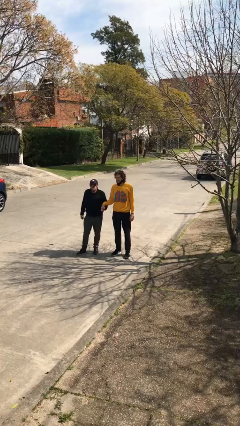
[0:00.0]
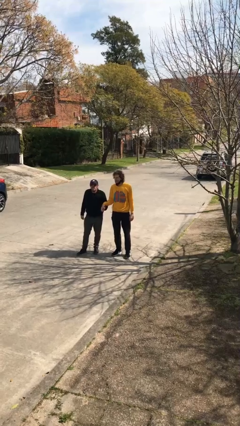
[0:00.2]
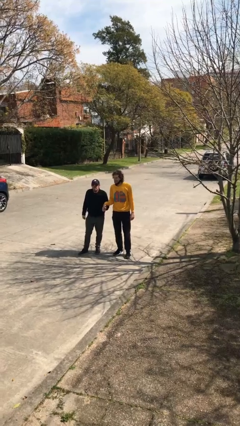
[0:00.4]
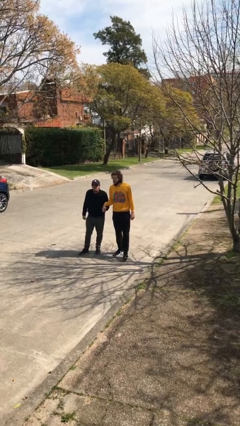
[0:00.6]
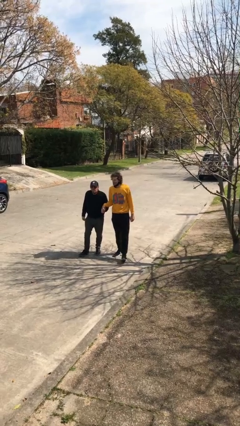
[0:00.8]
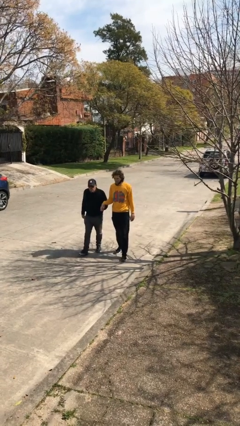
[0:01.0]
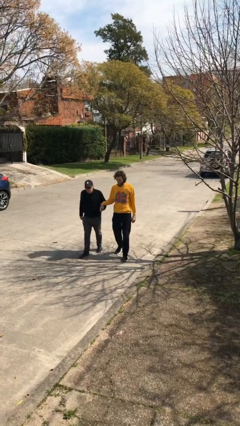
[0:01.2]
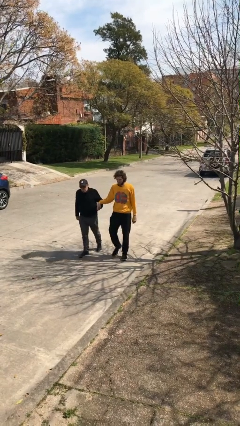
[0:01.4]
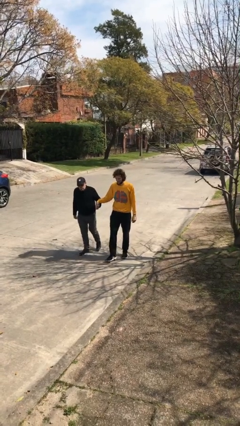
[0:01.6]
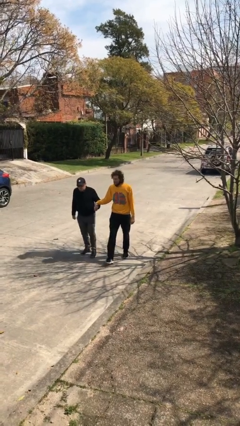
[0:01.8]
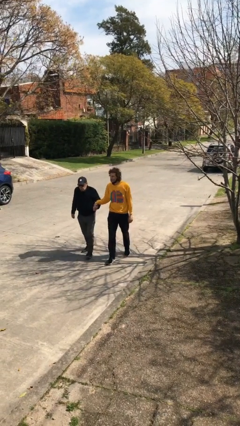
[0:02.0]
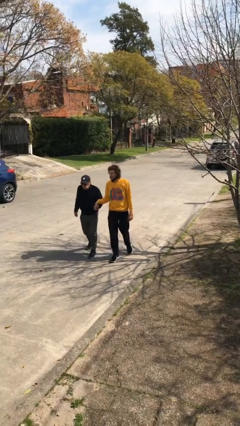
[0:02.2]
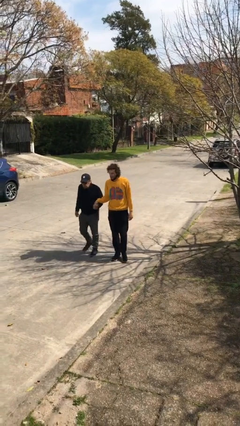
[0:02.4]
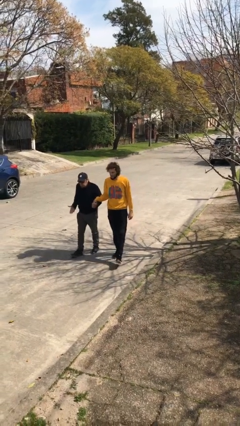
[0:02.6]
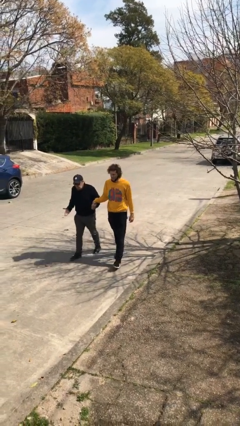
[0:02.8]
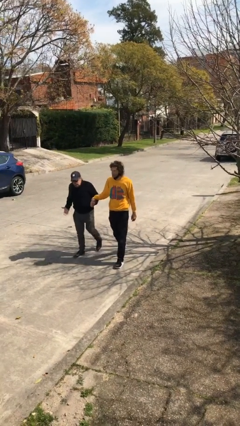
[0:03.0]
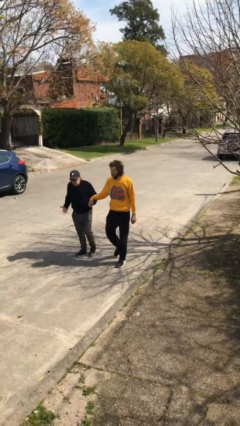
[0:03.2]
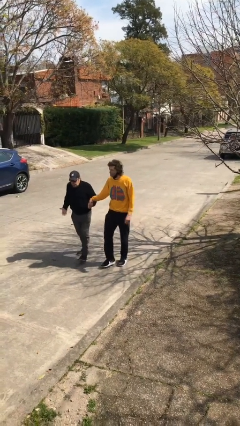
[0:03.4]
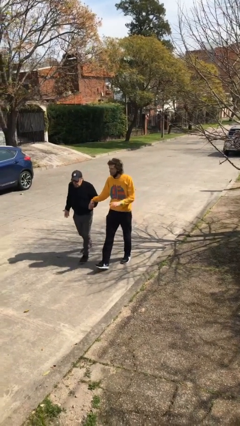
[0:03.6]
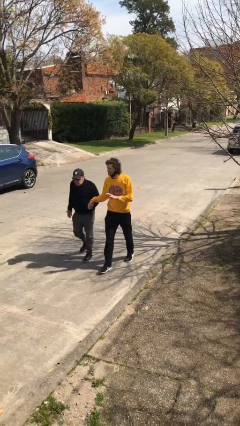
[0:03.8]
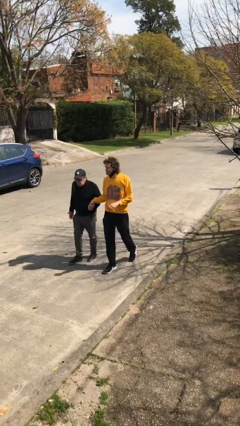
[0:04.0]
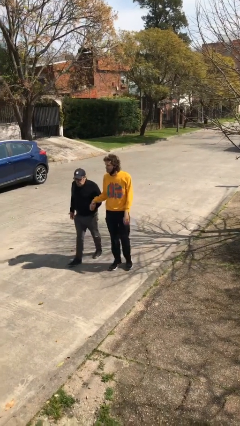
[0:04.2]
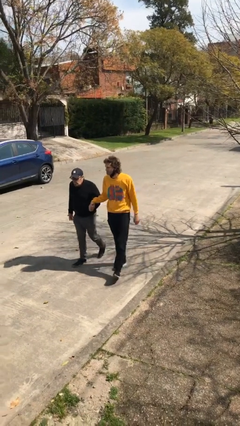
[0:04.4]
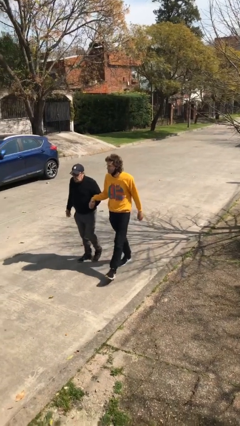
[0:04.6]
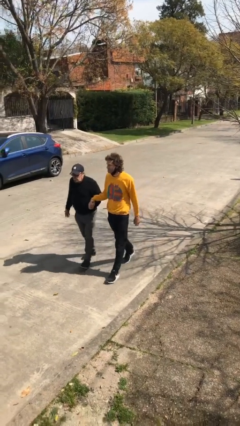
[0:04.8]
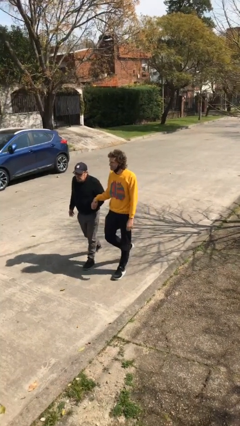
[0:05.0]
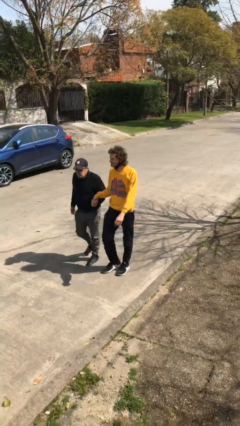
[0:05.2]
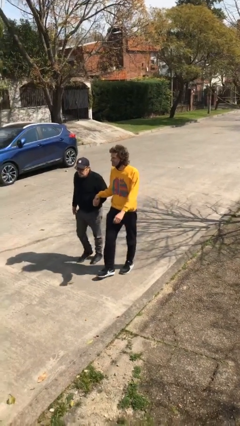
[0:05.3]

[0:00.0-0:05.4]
person holds hand

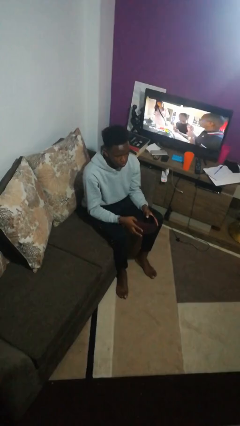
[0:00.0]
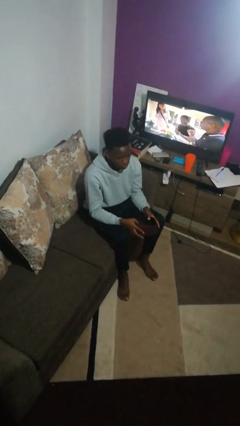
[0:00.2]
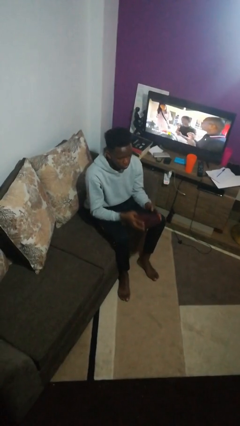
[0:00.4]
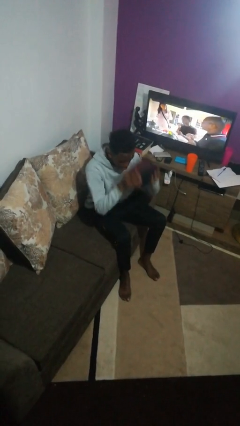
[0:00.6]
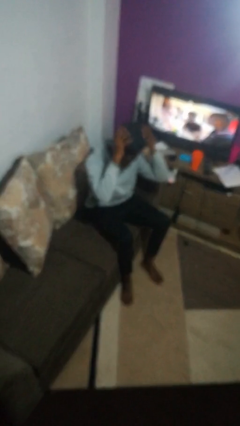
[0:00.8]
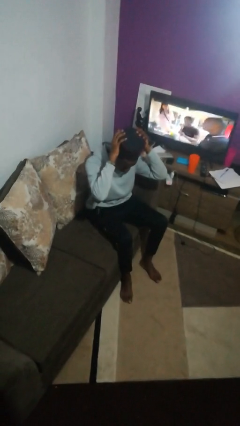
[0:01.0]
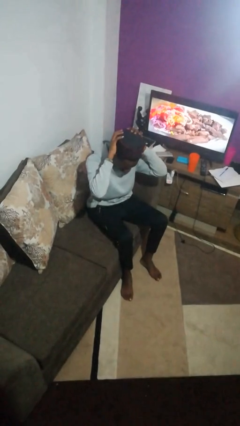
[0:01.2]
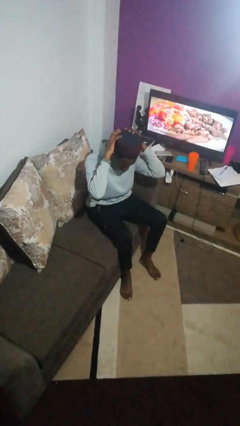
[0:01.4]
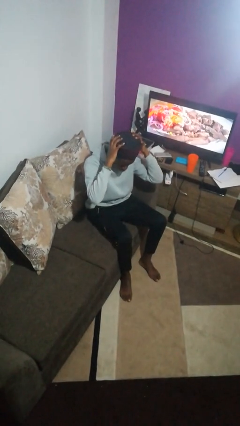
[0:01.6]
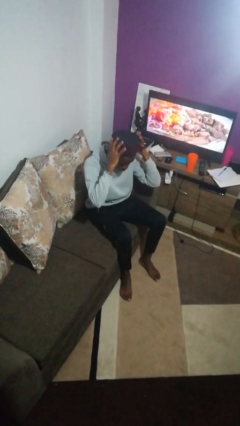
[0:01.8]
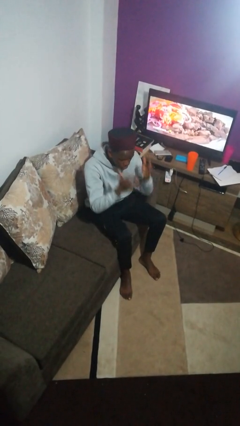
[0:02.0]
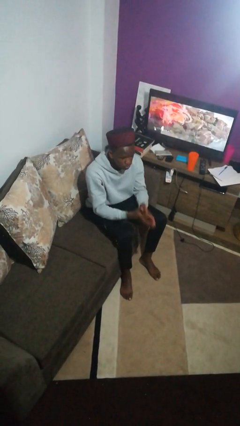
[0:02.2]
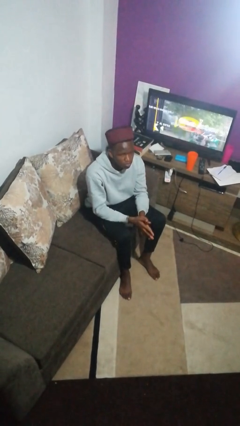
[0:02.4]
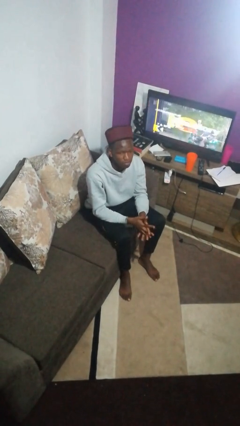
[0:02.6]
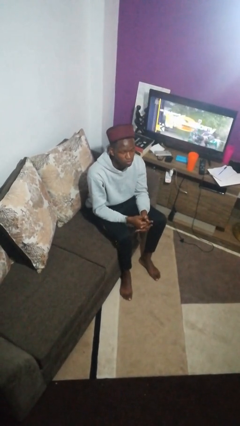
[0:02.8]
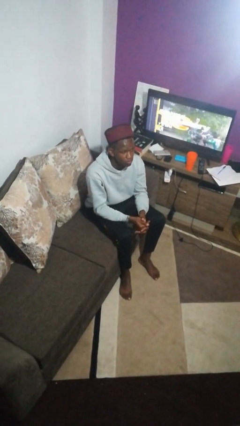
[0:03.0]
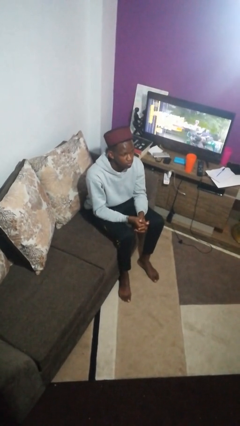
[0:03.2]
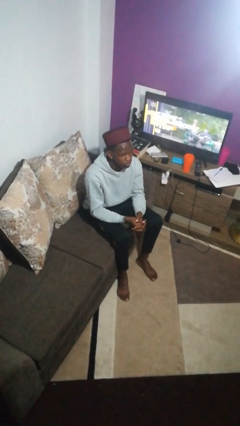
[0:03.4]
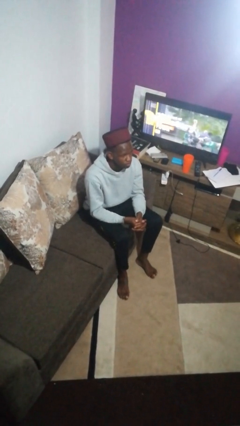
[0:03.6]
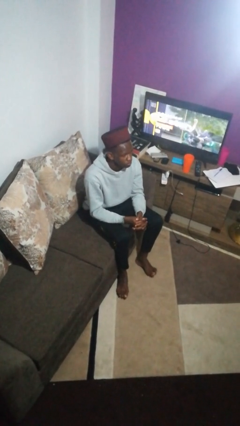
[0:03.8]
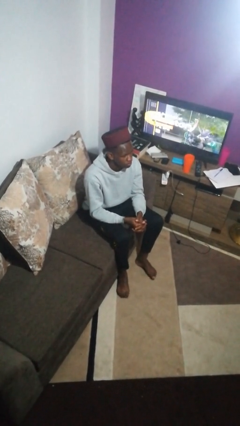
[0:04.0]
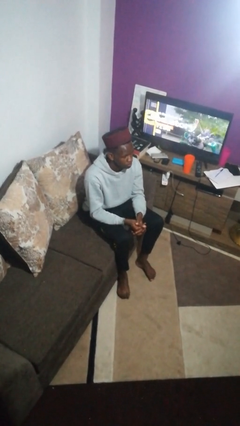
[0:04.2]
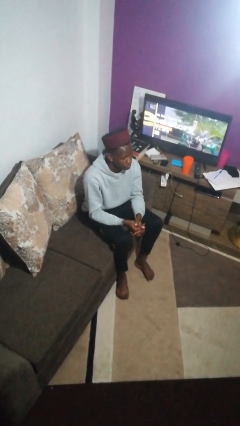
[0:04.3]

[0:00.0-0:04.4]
person puts on hat

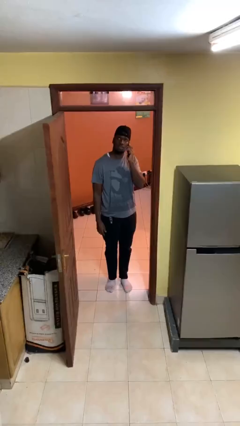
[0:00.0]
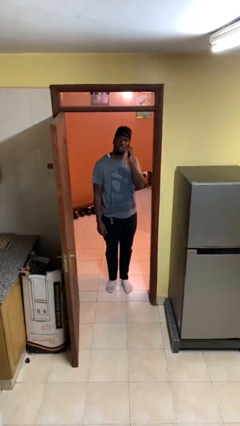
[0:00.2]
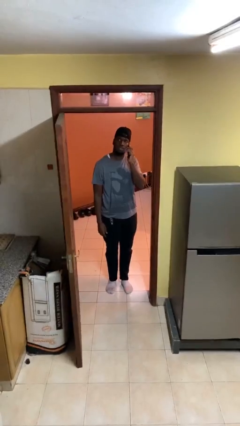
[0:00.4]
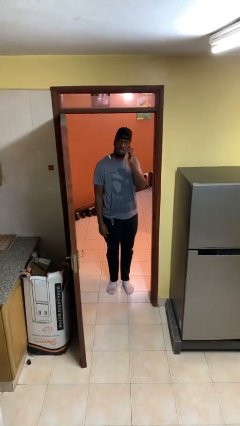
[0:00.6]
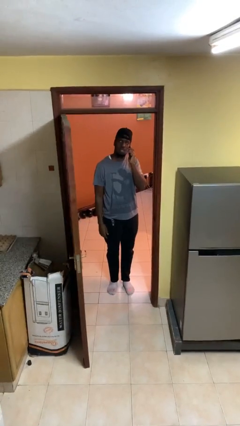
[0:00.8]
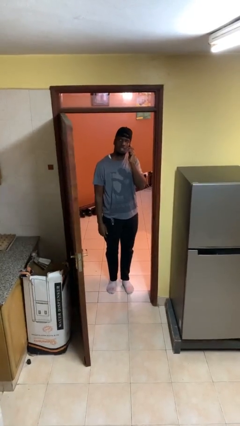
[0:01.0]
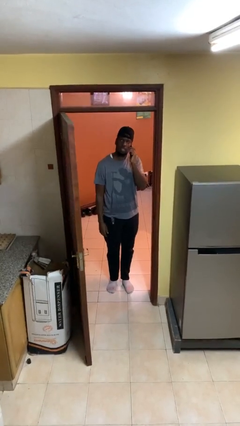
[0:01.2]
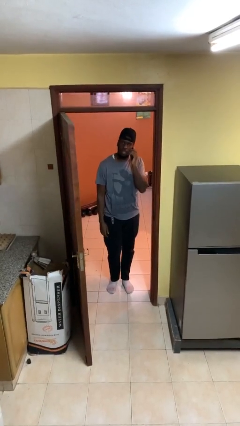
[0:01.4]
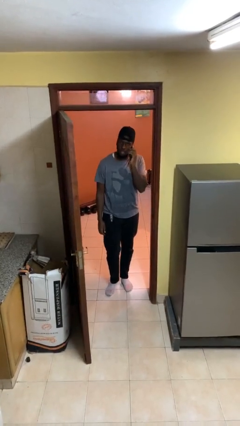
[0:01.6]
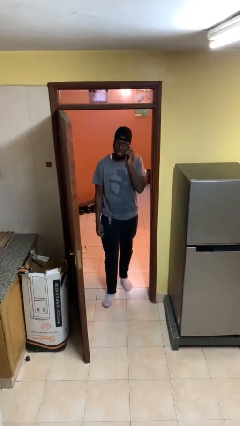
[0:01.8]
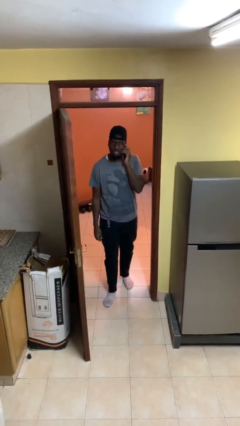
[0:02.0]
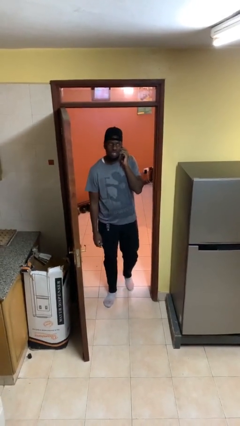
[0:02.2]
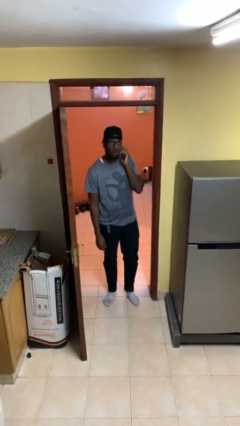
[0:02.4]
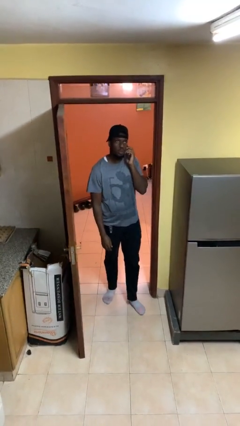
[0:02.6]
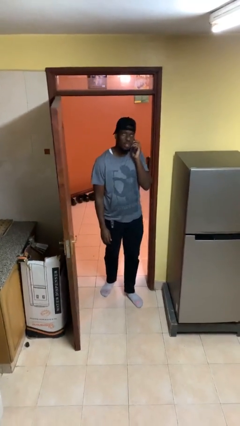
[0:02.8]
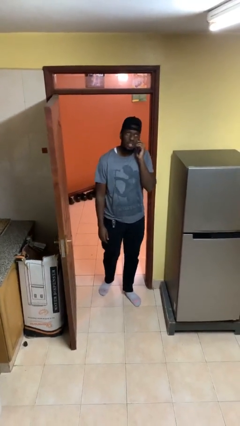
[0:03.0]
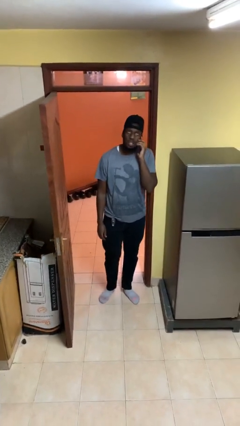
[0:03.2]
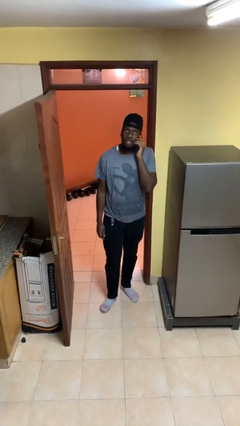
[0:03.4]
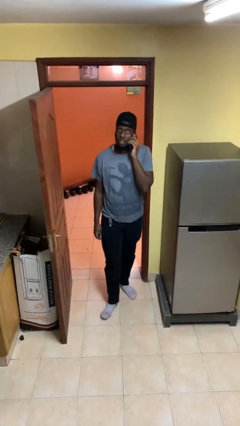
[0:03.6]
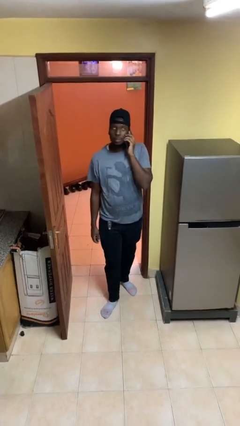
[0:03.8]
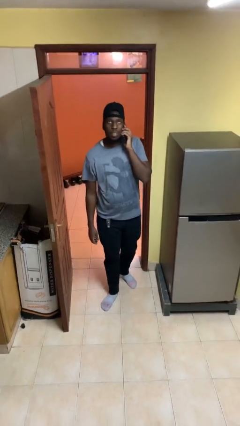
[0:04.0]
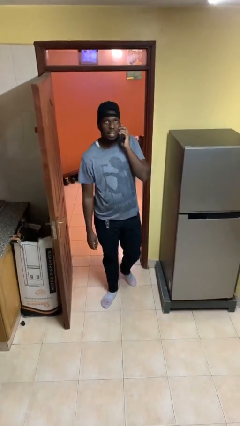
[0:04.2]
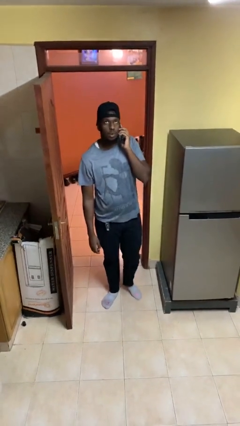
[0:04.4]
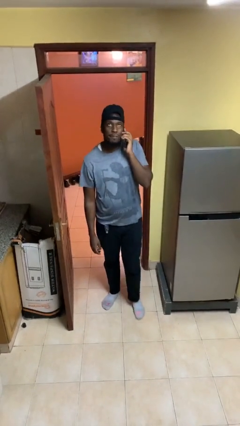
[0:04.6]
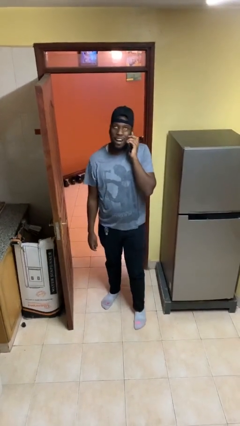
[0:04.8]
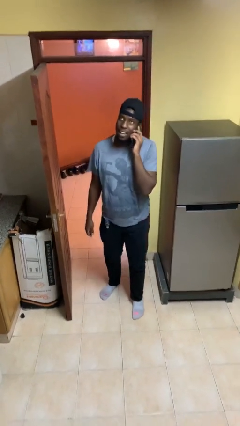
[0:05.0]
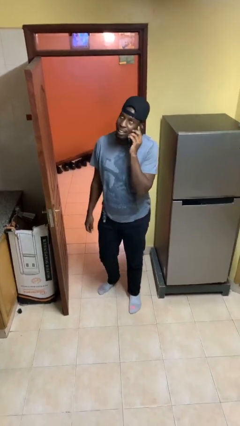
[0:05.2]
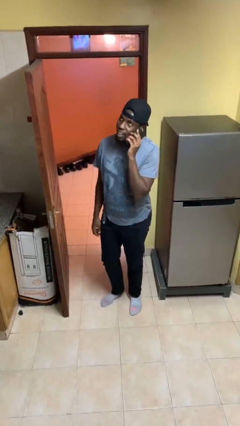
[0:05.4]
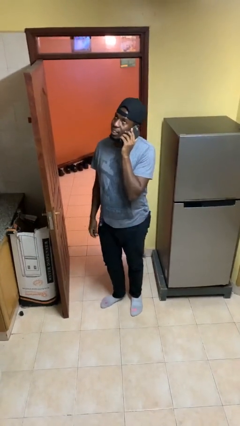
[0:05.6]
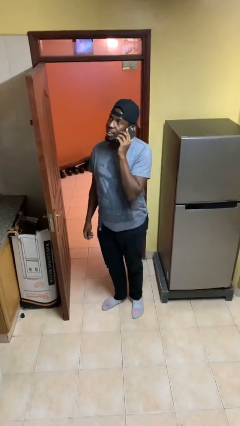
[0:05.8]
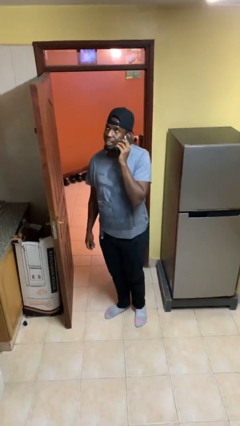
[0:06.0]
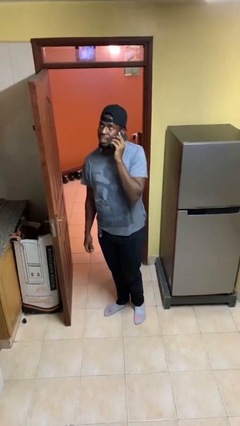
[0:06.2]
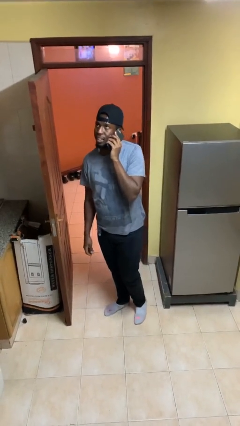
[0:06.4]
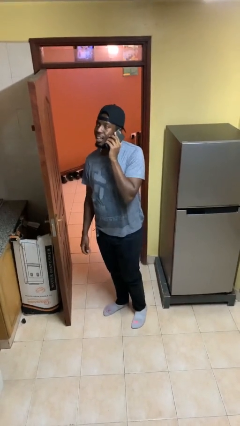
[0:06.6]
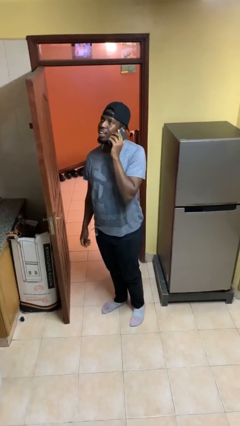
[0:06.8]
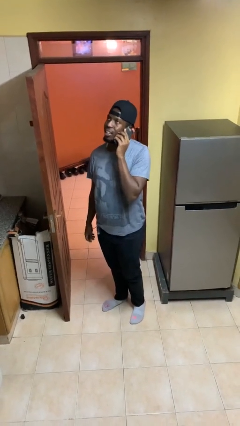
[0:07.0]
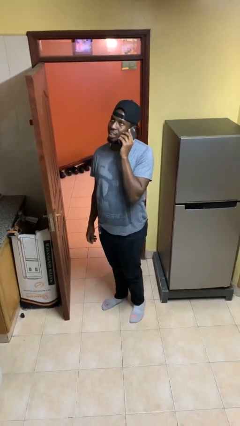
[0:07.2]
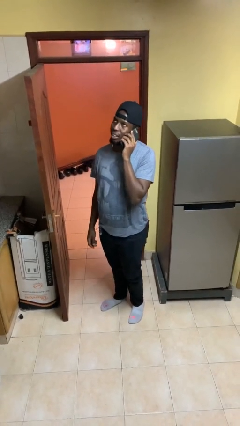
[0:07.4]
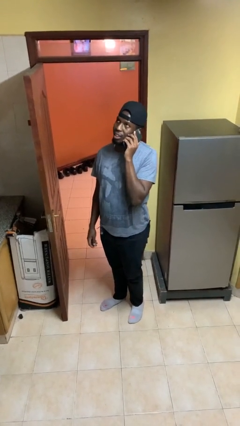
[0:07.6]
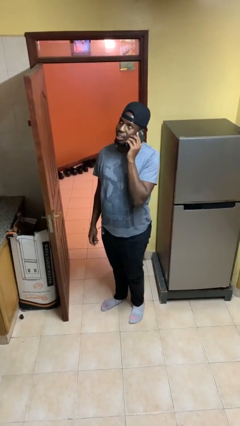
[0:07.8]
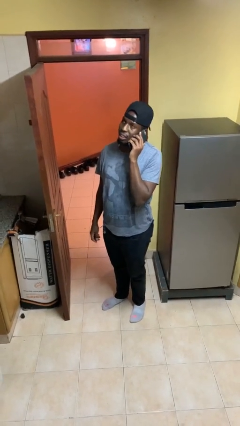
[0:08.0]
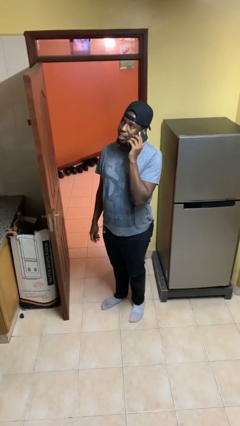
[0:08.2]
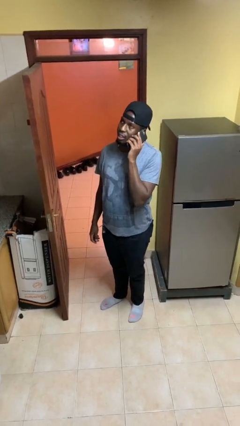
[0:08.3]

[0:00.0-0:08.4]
person enters scene through structure
